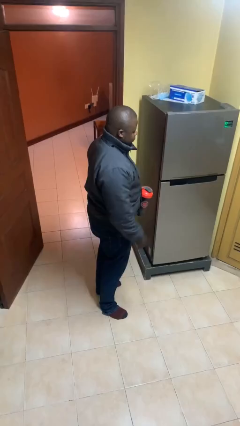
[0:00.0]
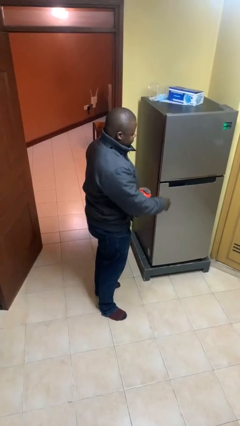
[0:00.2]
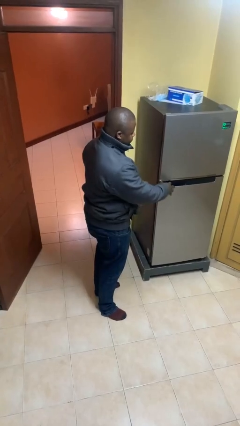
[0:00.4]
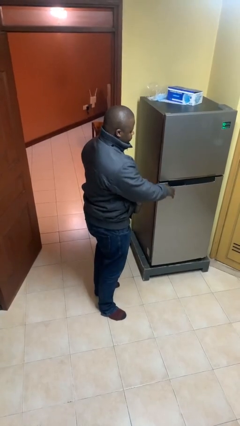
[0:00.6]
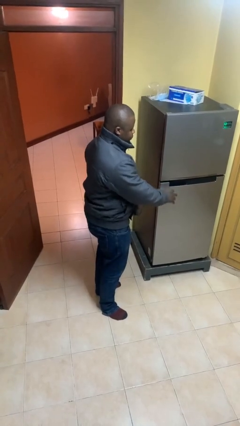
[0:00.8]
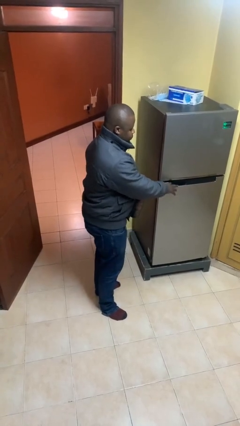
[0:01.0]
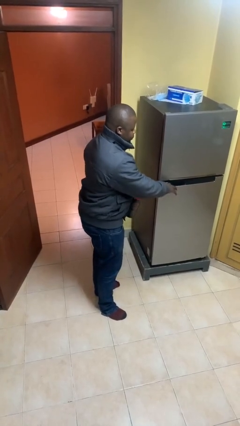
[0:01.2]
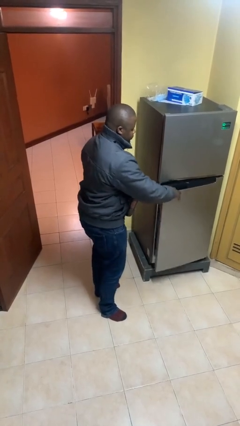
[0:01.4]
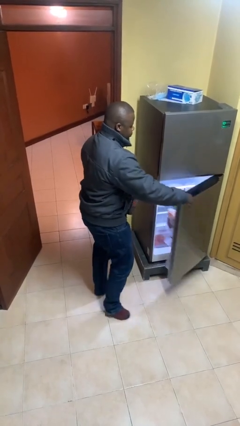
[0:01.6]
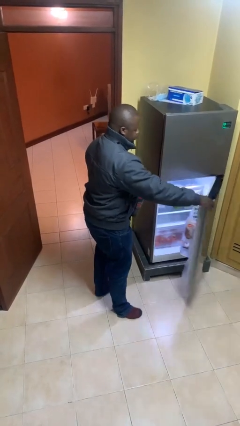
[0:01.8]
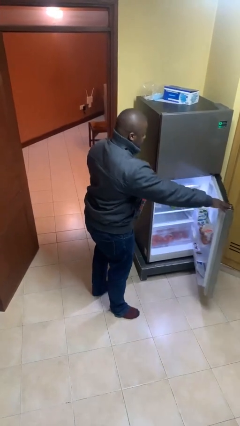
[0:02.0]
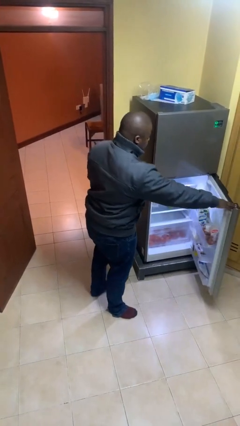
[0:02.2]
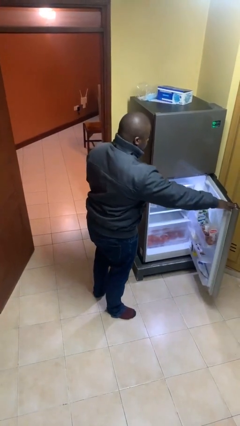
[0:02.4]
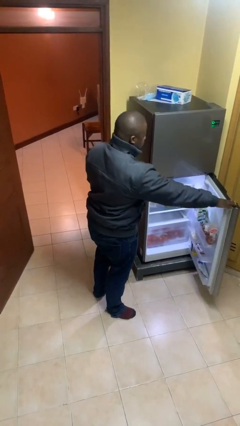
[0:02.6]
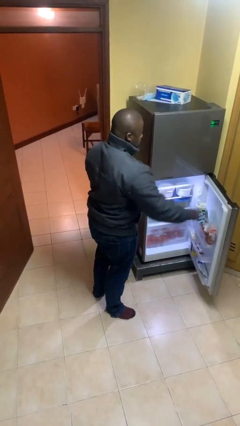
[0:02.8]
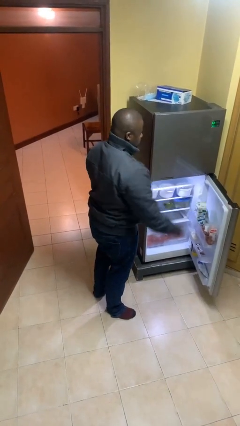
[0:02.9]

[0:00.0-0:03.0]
person opens refrigerator

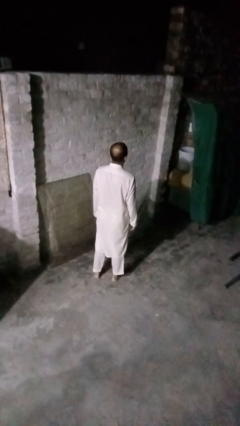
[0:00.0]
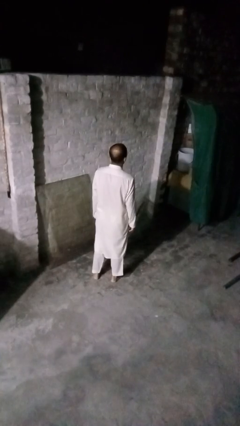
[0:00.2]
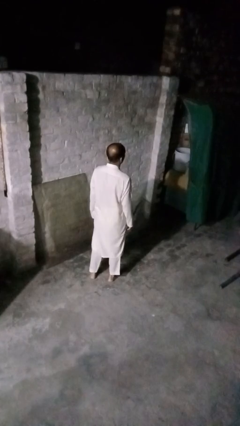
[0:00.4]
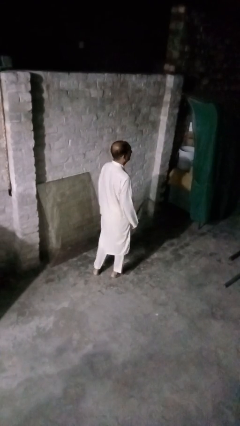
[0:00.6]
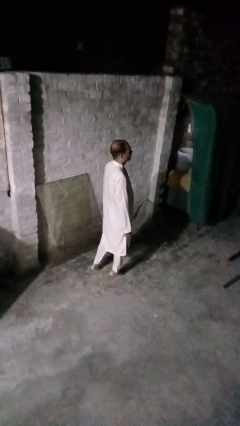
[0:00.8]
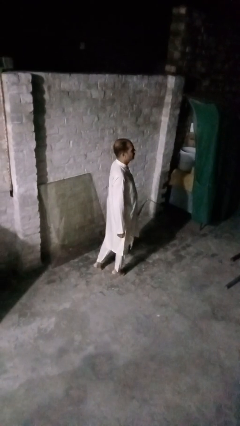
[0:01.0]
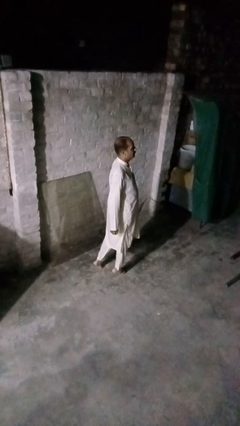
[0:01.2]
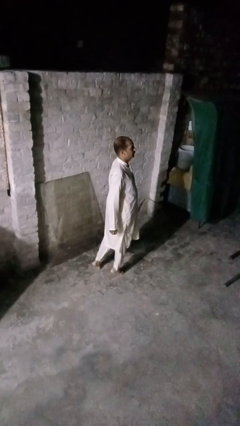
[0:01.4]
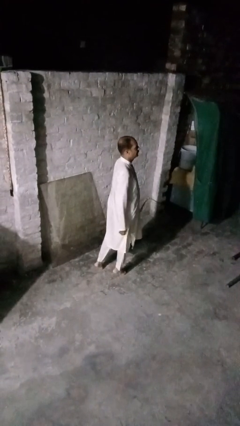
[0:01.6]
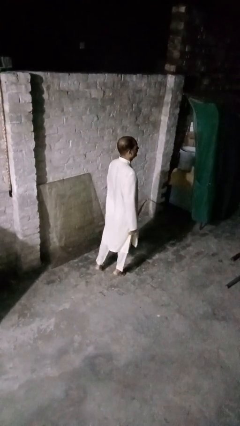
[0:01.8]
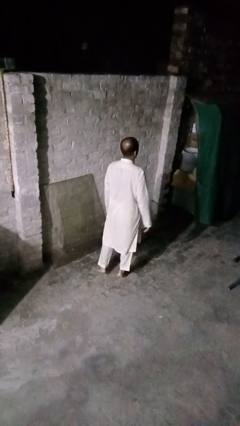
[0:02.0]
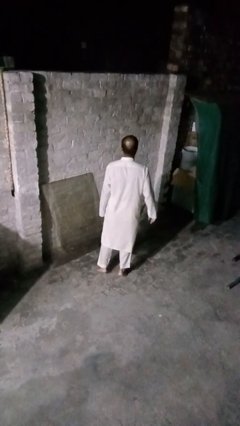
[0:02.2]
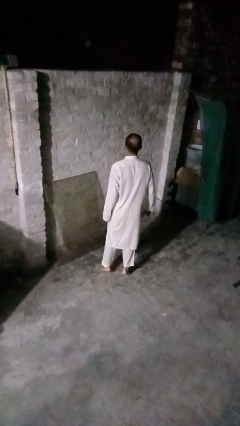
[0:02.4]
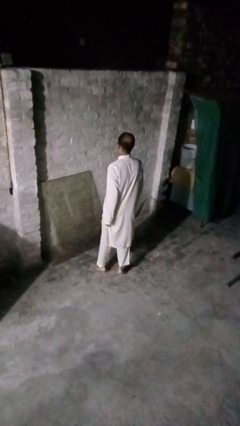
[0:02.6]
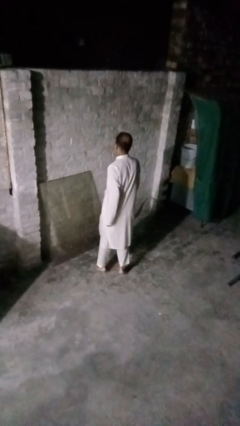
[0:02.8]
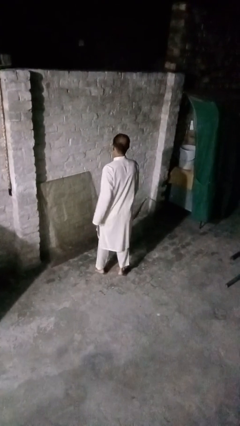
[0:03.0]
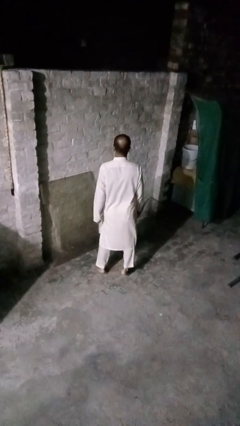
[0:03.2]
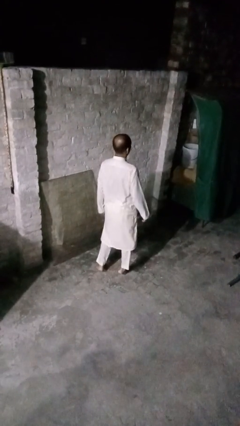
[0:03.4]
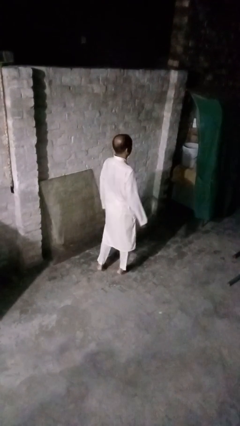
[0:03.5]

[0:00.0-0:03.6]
person twirls

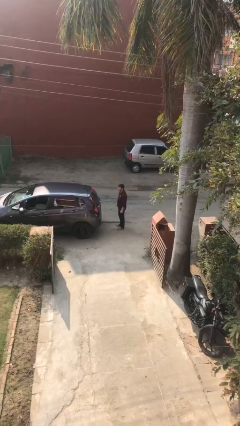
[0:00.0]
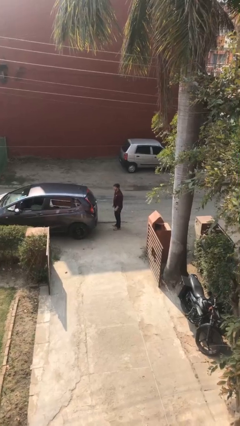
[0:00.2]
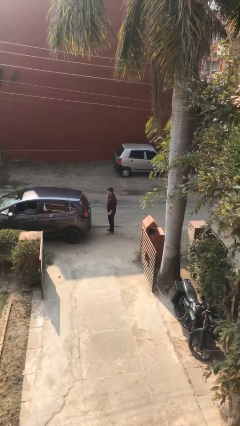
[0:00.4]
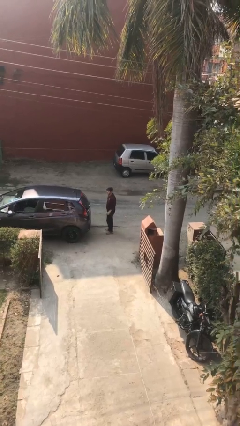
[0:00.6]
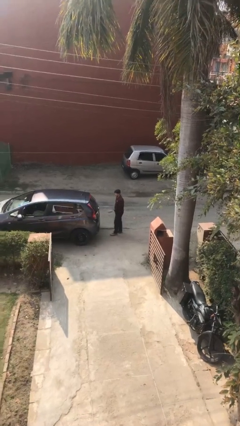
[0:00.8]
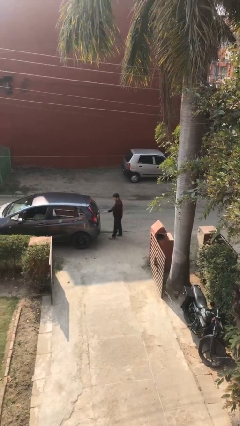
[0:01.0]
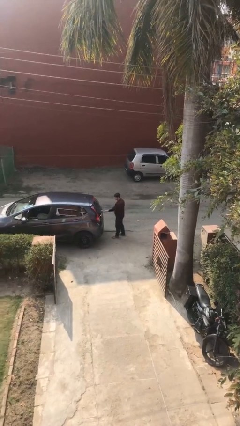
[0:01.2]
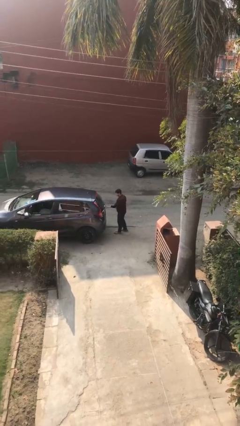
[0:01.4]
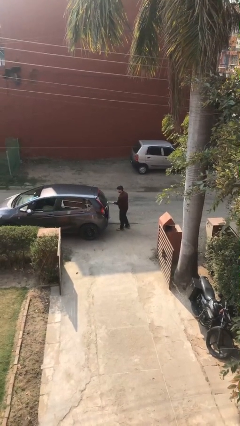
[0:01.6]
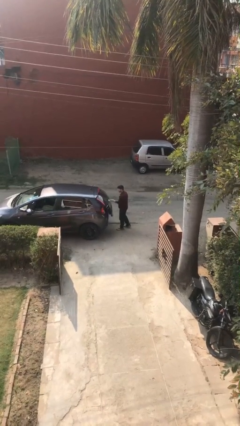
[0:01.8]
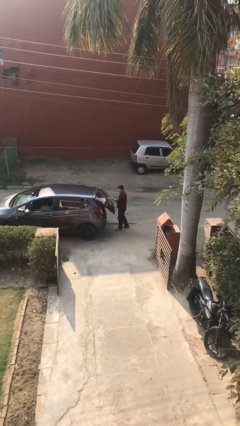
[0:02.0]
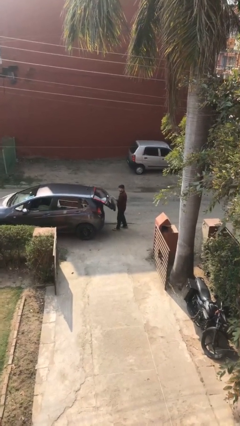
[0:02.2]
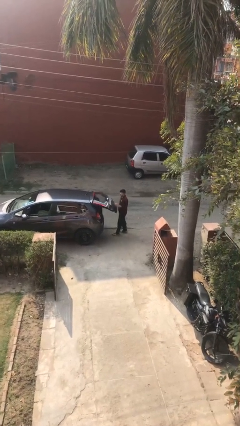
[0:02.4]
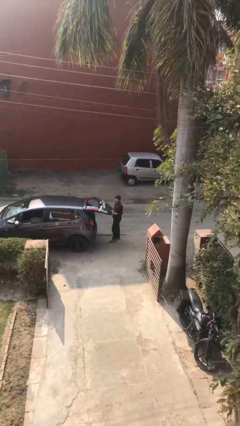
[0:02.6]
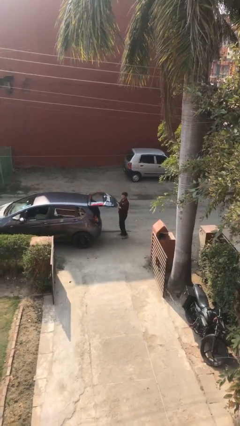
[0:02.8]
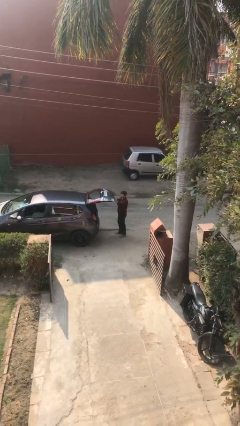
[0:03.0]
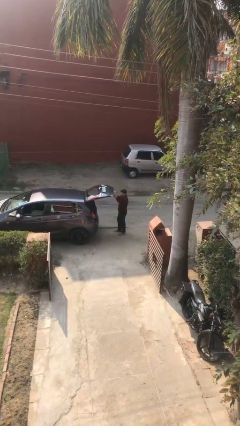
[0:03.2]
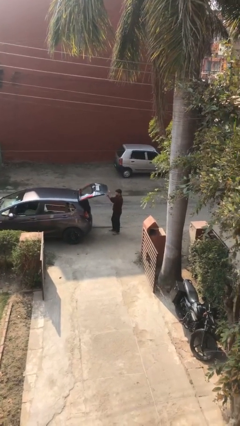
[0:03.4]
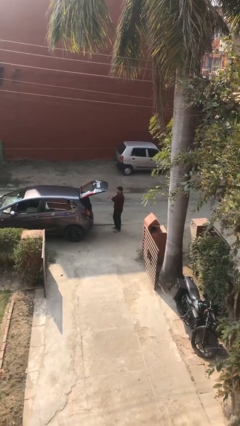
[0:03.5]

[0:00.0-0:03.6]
person opens car trunk

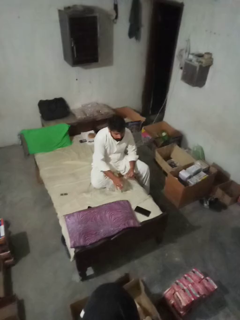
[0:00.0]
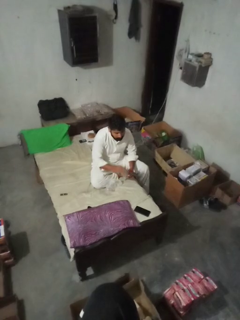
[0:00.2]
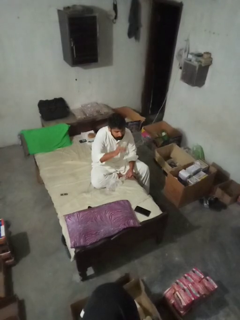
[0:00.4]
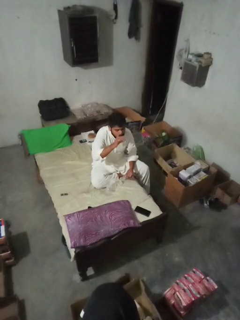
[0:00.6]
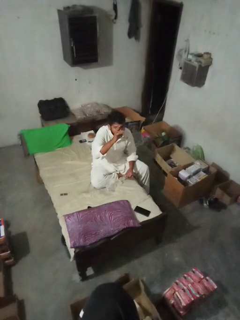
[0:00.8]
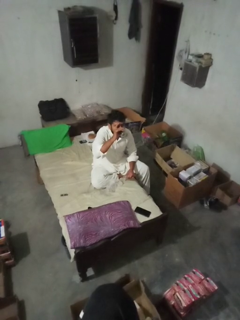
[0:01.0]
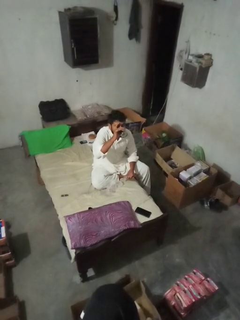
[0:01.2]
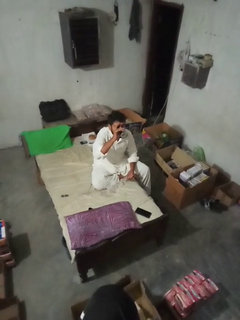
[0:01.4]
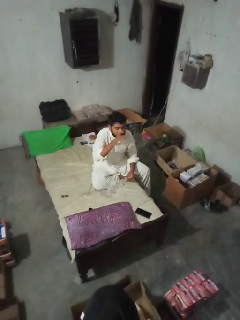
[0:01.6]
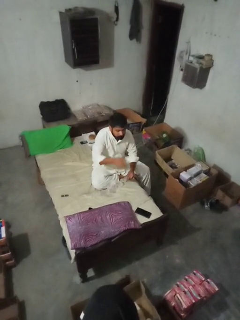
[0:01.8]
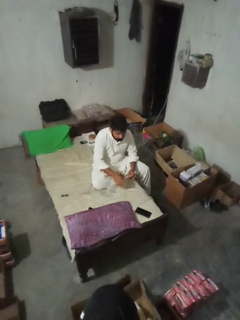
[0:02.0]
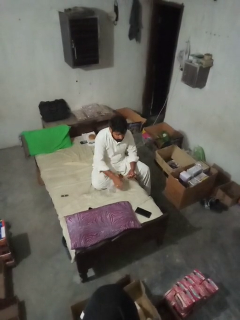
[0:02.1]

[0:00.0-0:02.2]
person drinks from cup

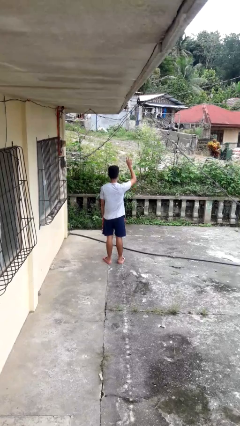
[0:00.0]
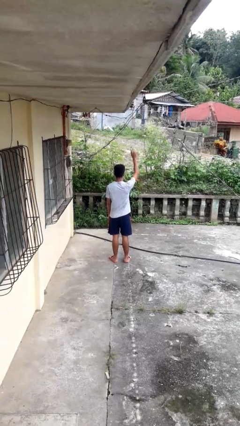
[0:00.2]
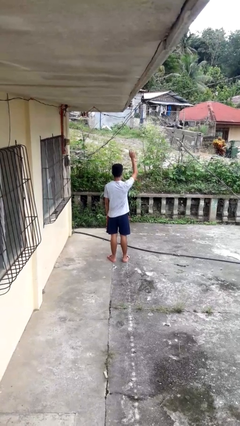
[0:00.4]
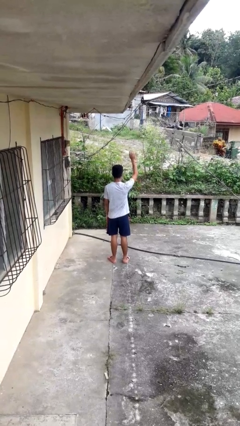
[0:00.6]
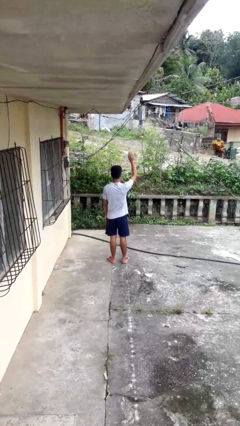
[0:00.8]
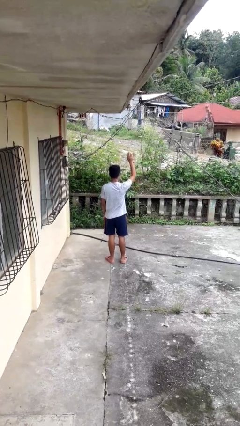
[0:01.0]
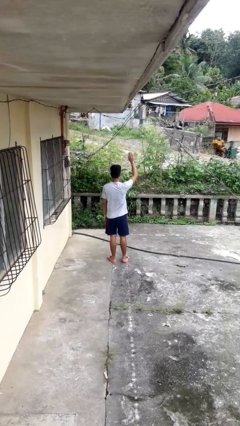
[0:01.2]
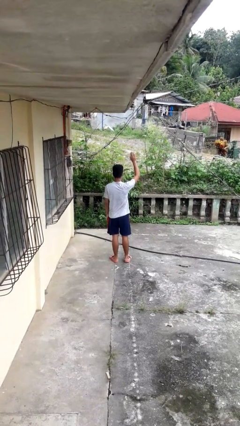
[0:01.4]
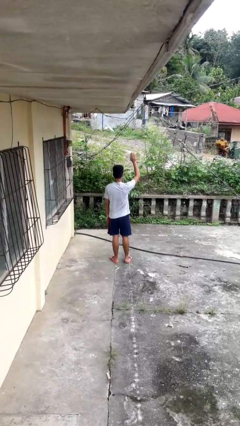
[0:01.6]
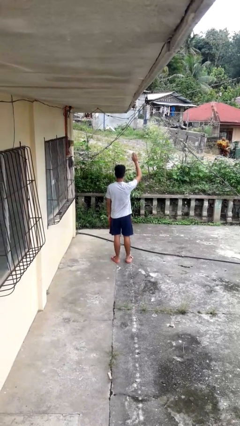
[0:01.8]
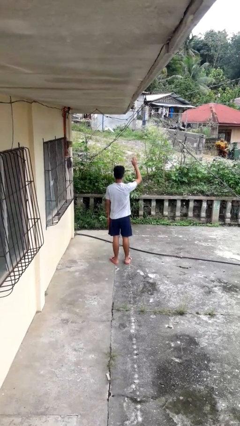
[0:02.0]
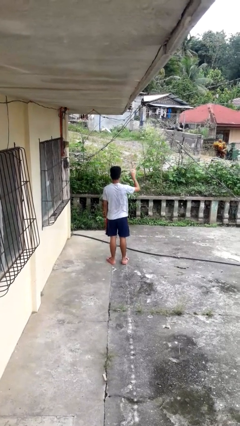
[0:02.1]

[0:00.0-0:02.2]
person gestures raise hand

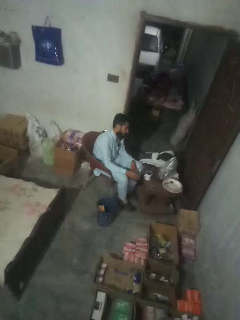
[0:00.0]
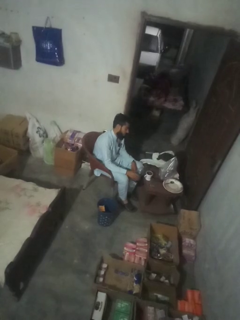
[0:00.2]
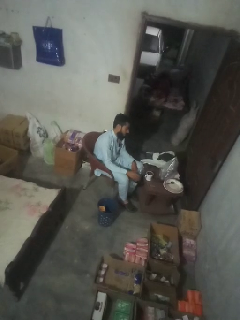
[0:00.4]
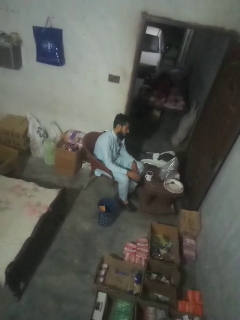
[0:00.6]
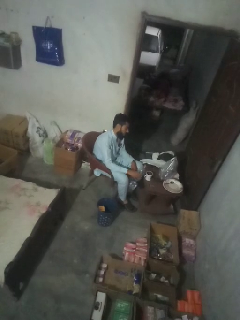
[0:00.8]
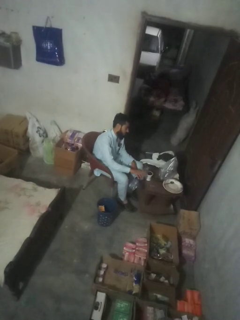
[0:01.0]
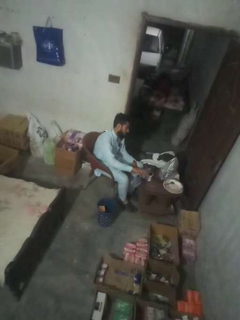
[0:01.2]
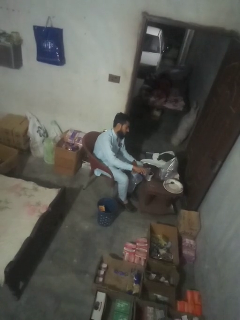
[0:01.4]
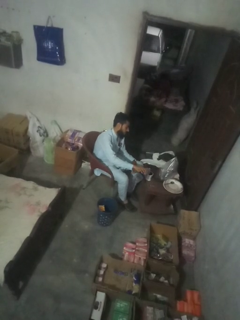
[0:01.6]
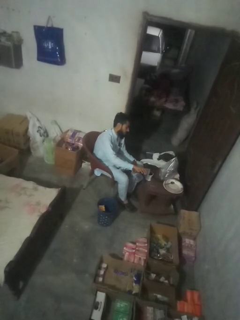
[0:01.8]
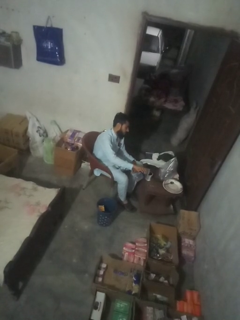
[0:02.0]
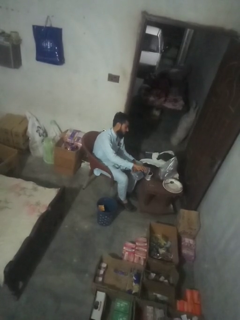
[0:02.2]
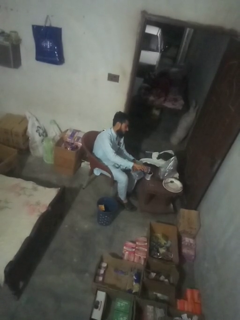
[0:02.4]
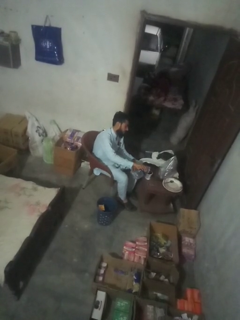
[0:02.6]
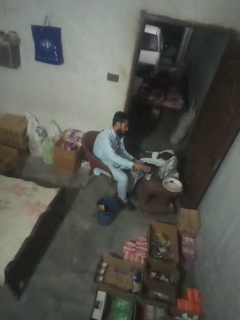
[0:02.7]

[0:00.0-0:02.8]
person pours liquid into cup

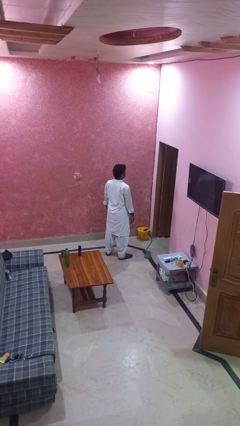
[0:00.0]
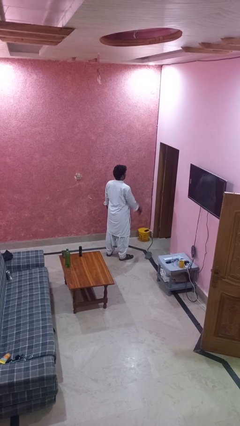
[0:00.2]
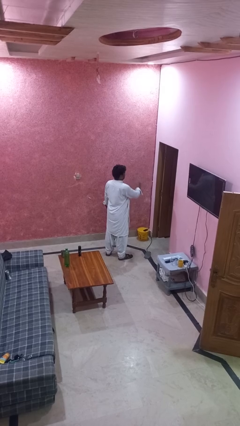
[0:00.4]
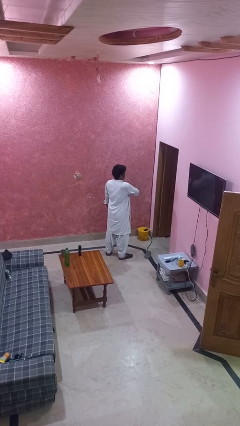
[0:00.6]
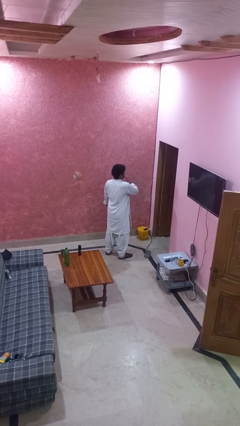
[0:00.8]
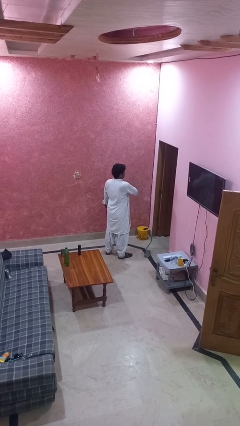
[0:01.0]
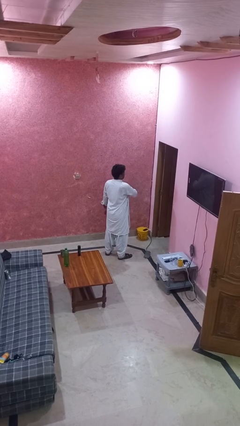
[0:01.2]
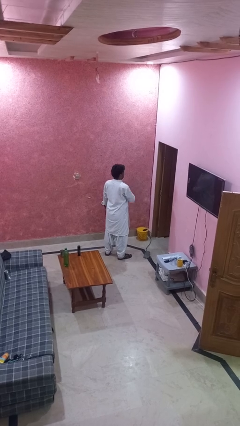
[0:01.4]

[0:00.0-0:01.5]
person drums on chest
